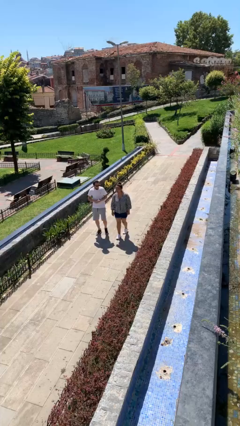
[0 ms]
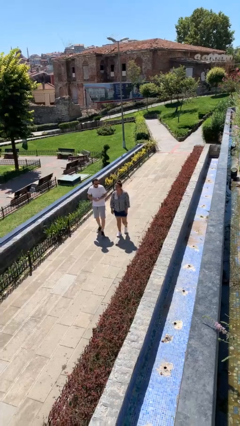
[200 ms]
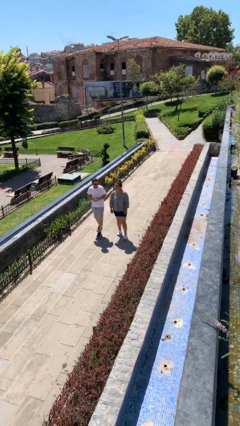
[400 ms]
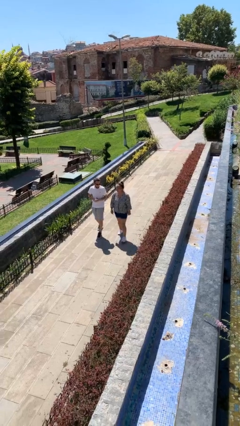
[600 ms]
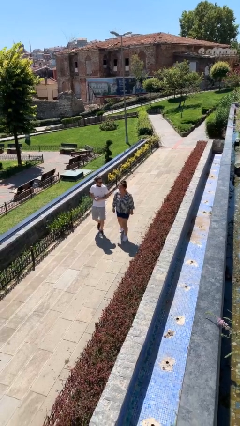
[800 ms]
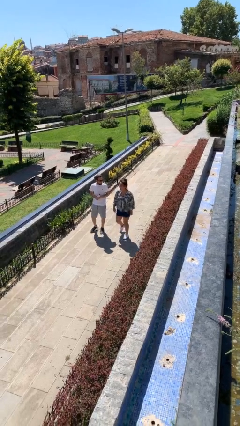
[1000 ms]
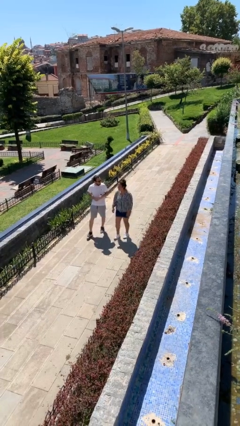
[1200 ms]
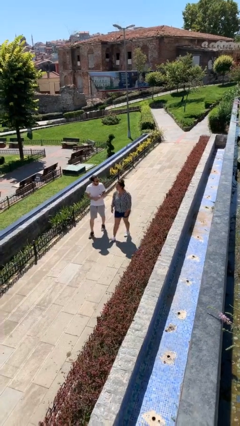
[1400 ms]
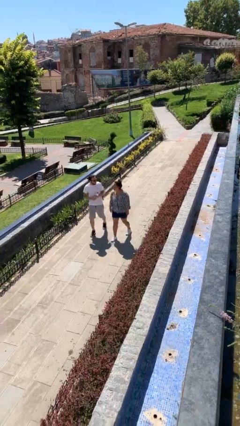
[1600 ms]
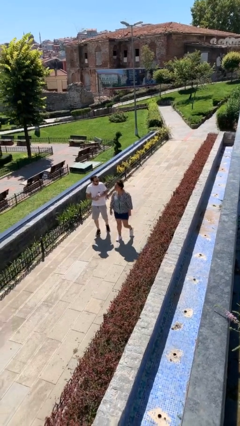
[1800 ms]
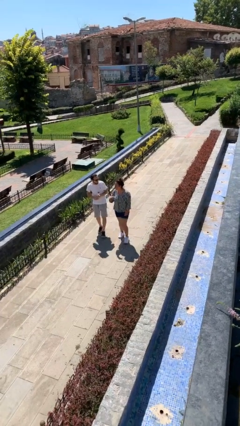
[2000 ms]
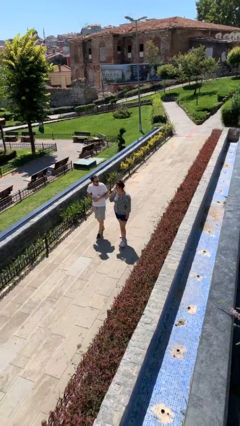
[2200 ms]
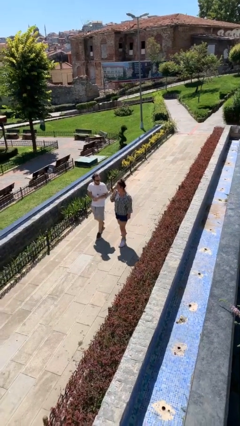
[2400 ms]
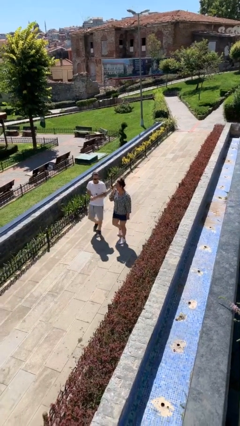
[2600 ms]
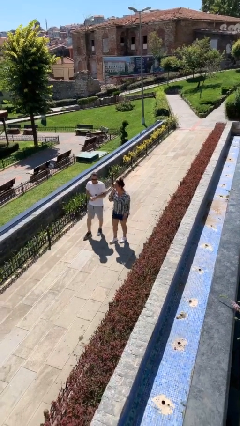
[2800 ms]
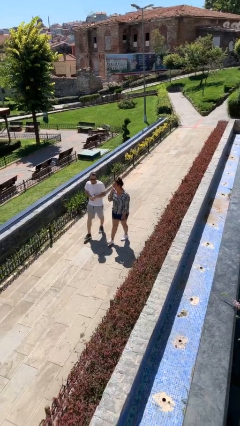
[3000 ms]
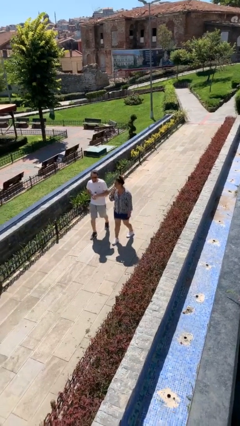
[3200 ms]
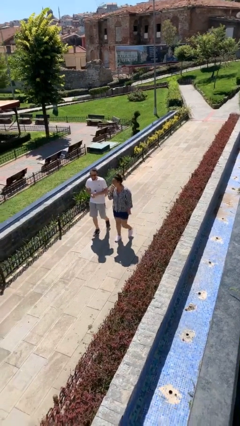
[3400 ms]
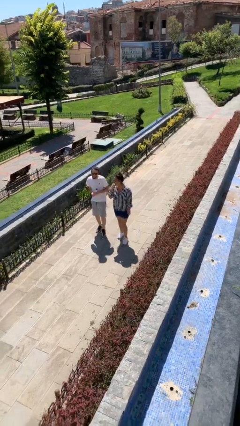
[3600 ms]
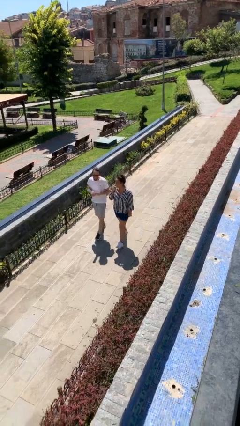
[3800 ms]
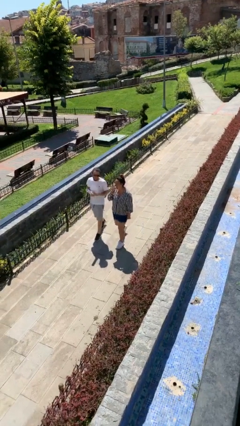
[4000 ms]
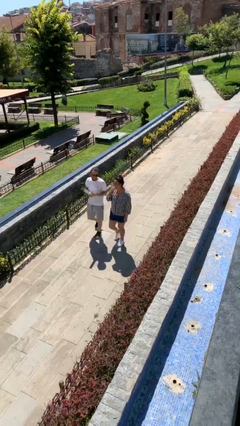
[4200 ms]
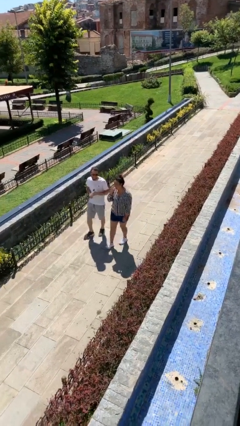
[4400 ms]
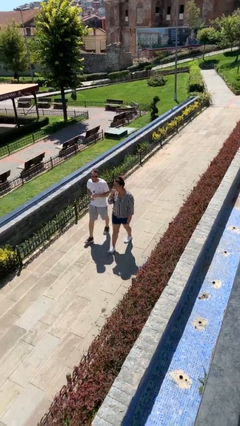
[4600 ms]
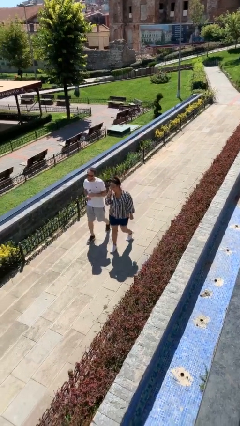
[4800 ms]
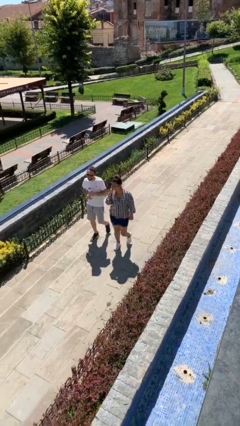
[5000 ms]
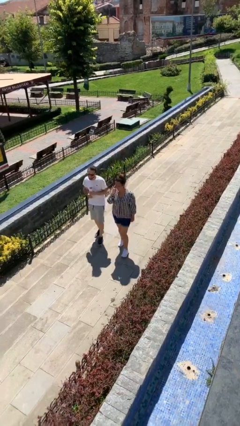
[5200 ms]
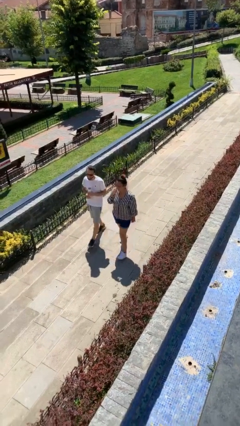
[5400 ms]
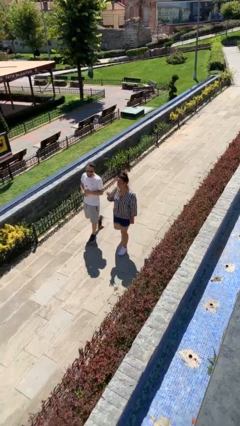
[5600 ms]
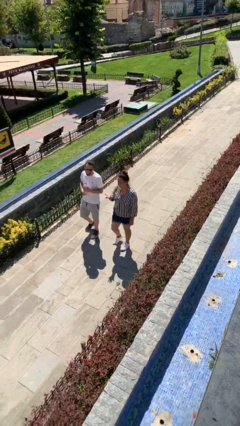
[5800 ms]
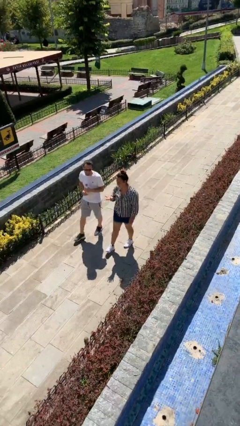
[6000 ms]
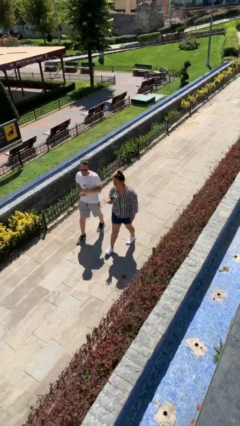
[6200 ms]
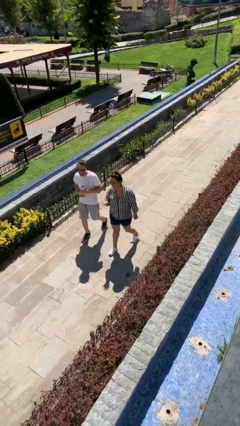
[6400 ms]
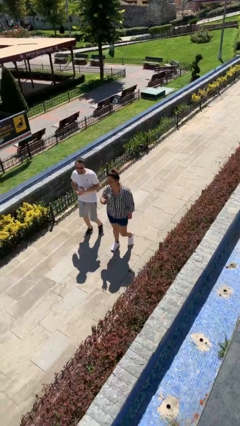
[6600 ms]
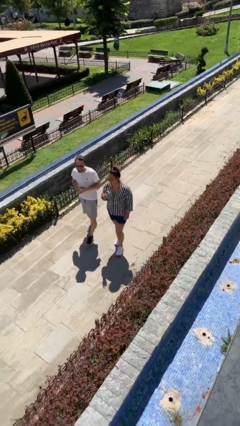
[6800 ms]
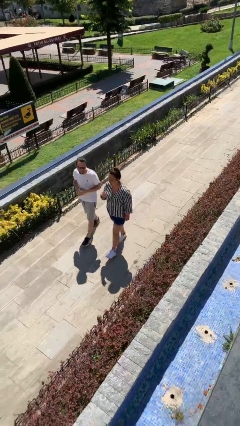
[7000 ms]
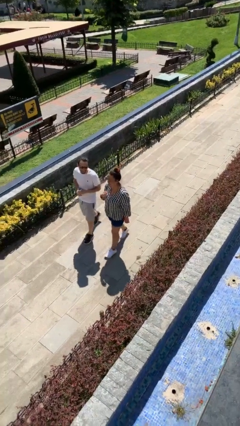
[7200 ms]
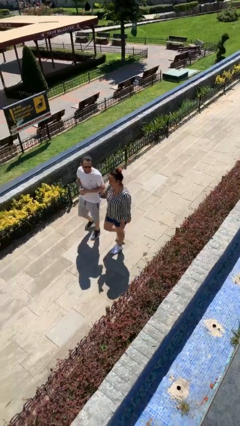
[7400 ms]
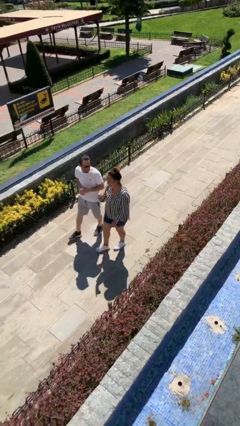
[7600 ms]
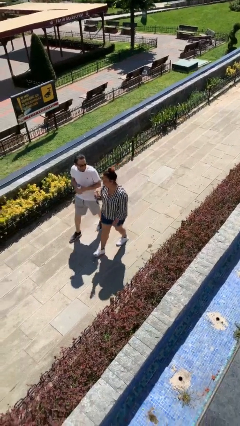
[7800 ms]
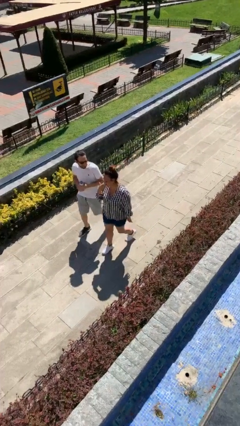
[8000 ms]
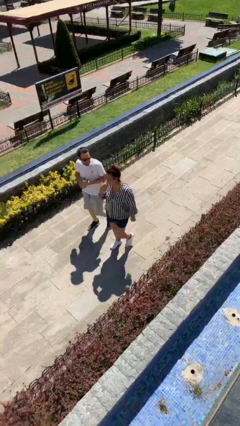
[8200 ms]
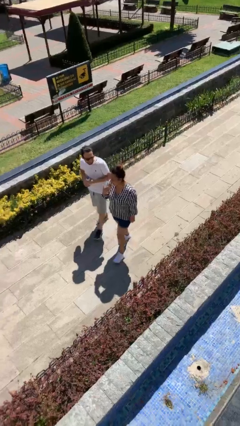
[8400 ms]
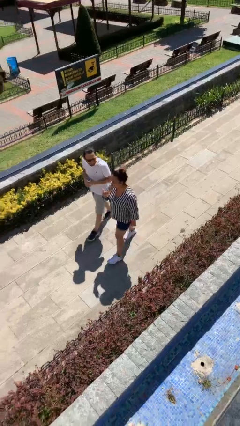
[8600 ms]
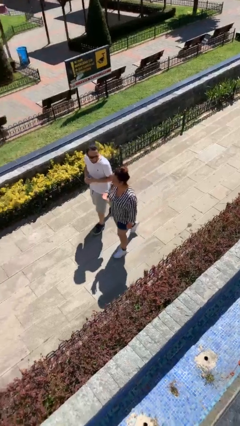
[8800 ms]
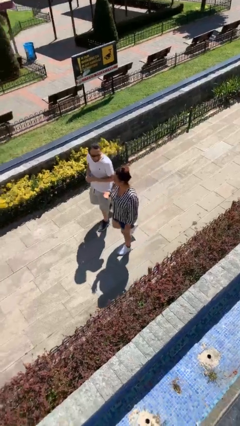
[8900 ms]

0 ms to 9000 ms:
person talks to person

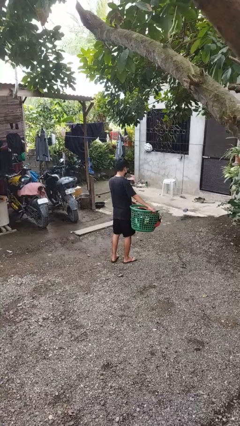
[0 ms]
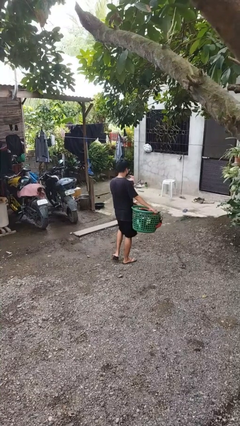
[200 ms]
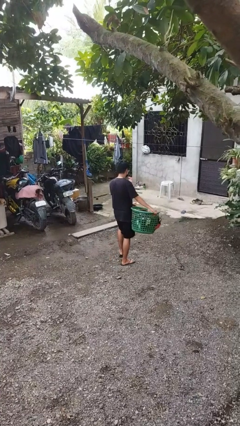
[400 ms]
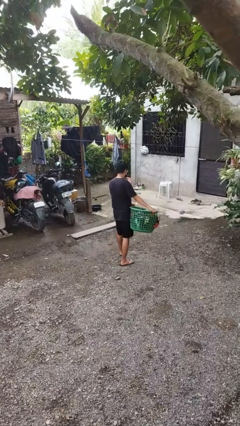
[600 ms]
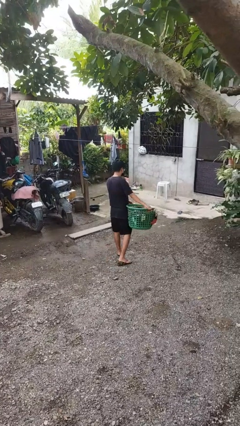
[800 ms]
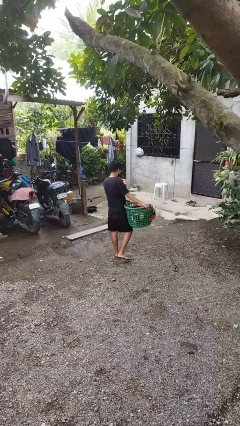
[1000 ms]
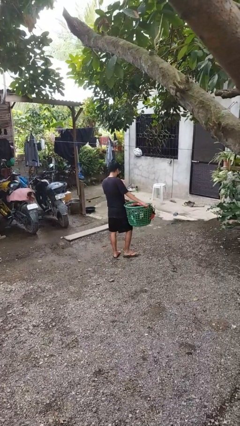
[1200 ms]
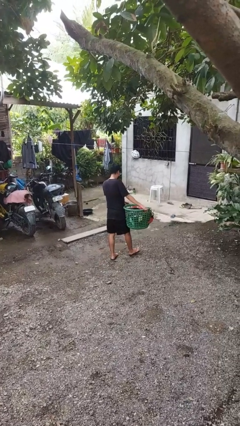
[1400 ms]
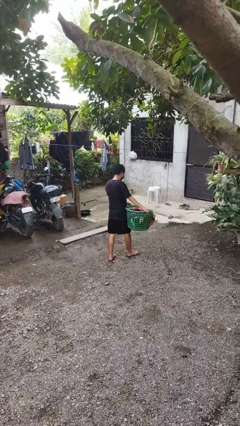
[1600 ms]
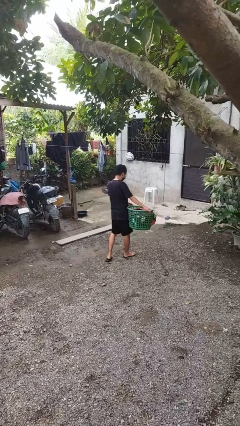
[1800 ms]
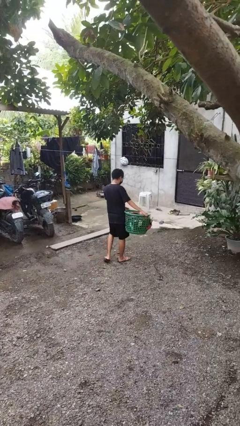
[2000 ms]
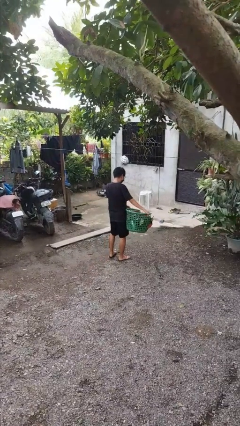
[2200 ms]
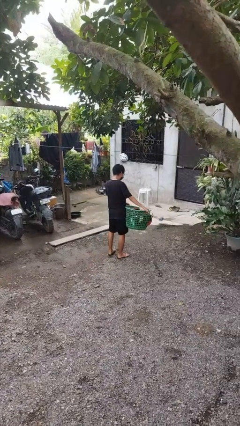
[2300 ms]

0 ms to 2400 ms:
person carries laundry basket

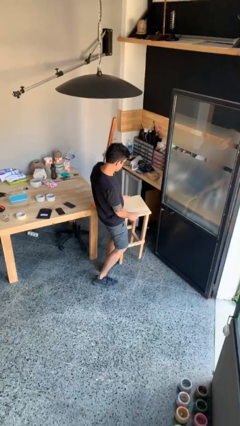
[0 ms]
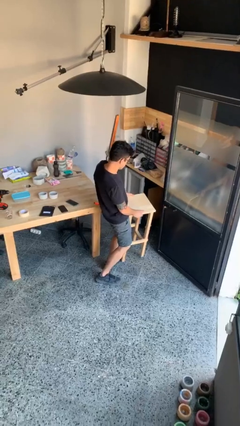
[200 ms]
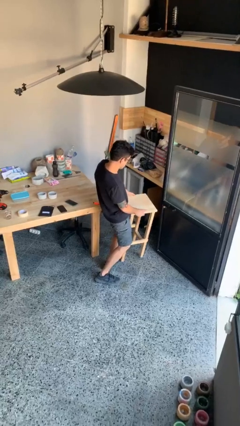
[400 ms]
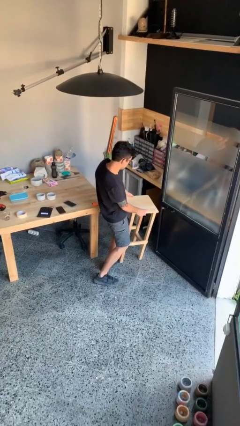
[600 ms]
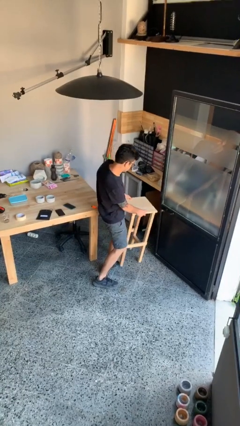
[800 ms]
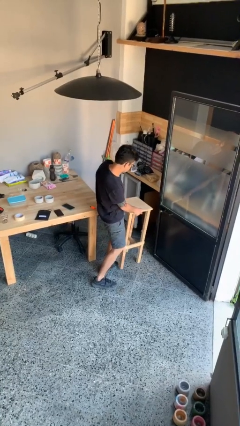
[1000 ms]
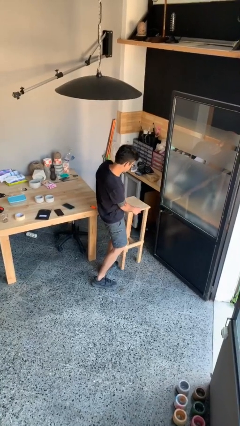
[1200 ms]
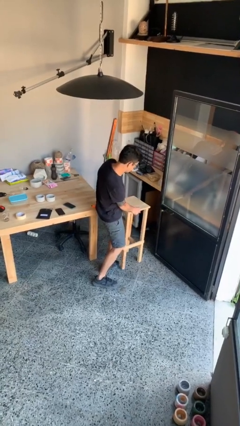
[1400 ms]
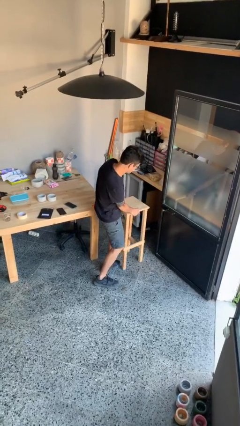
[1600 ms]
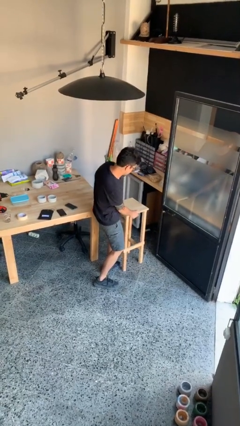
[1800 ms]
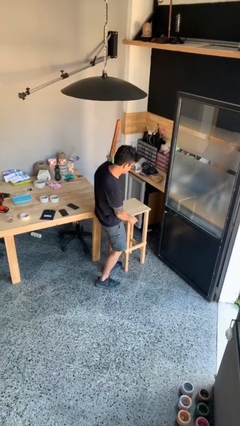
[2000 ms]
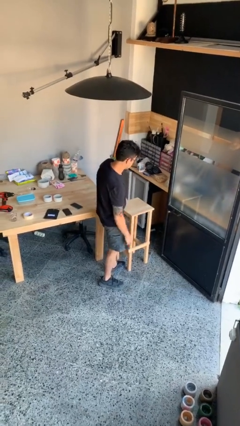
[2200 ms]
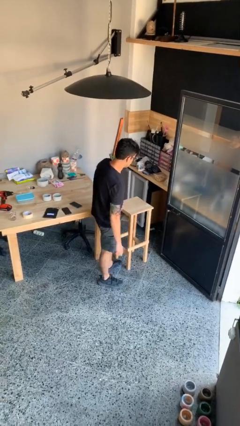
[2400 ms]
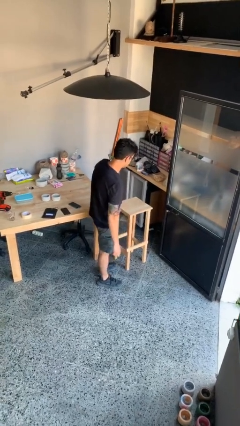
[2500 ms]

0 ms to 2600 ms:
person puts down object on floor

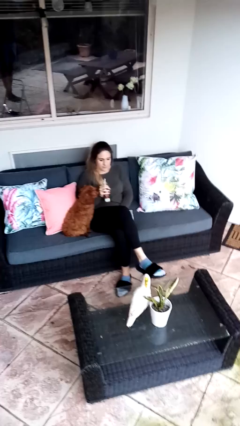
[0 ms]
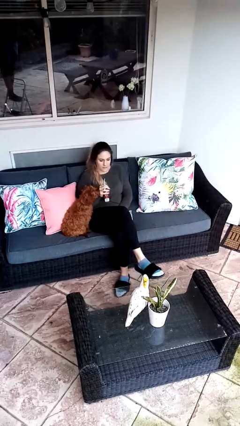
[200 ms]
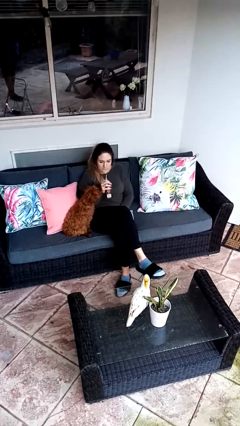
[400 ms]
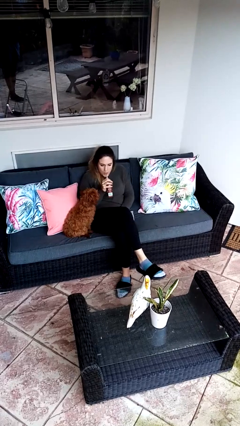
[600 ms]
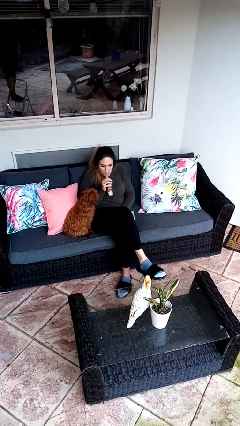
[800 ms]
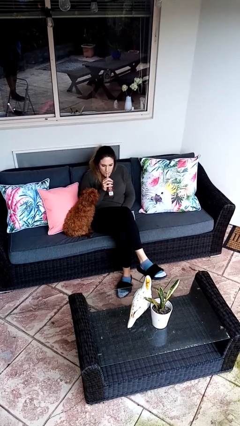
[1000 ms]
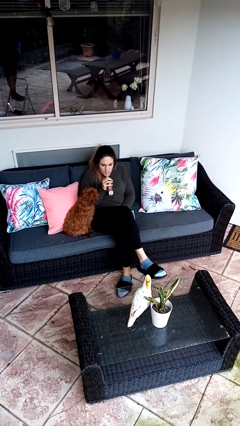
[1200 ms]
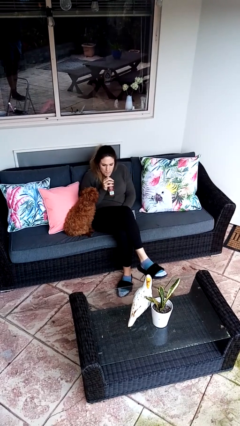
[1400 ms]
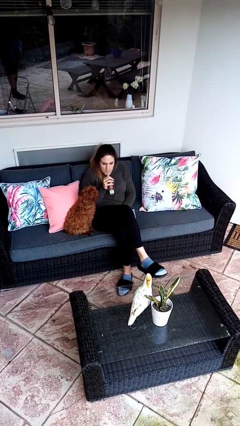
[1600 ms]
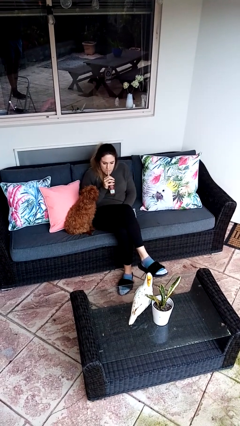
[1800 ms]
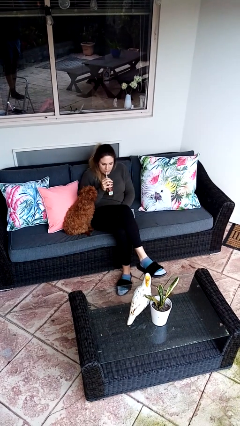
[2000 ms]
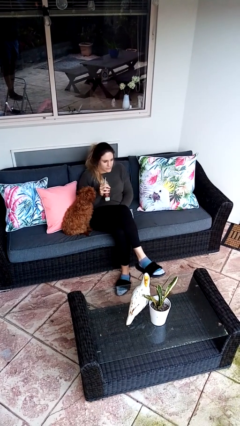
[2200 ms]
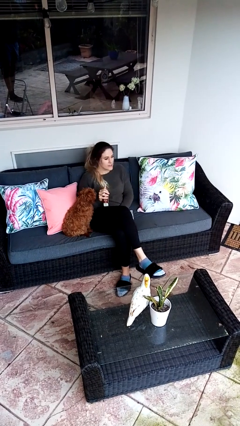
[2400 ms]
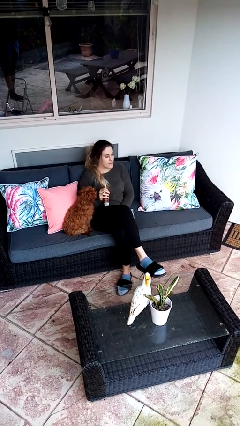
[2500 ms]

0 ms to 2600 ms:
person drinks from straw

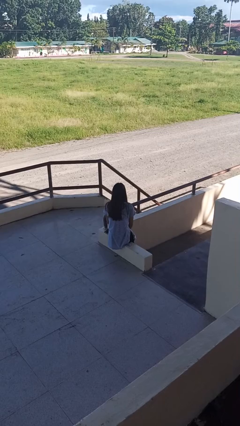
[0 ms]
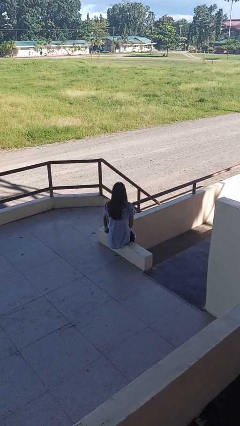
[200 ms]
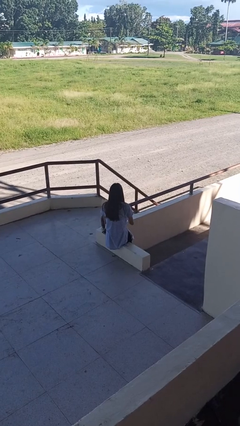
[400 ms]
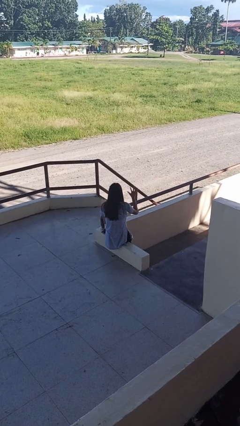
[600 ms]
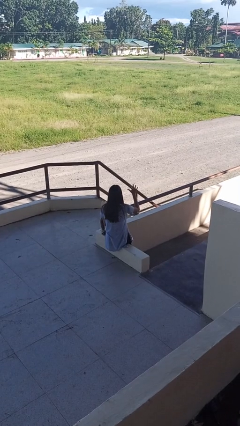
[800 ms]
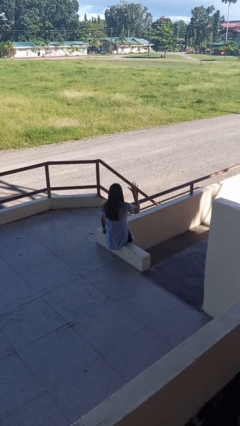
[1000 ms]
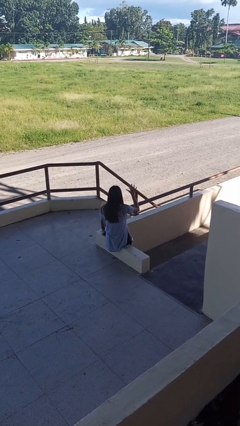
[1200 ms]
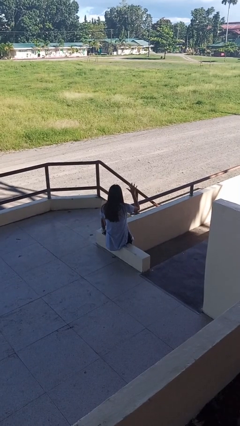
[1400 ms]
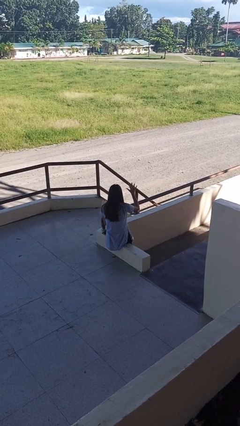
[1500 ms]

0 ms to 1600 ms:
person gestures number five
